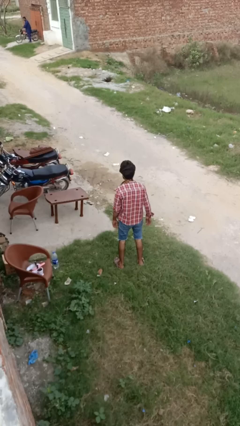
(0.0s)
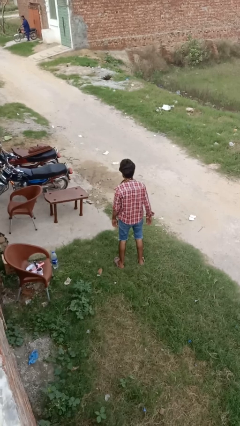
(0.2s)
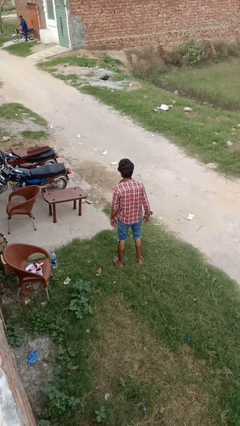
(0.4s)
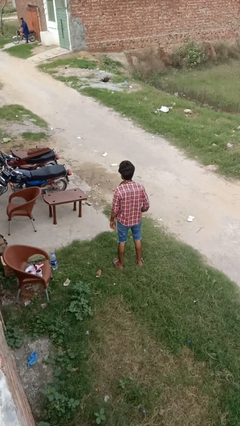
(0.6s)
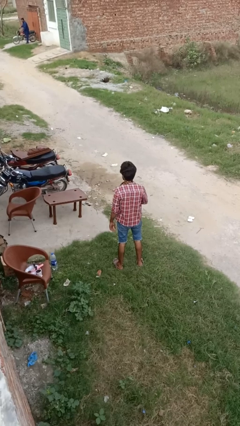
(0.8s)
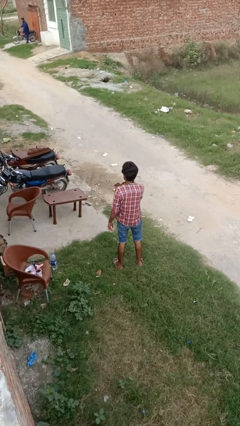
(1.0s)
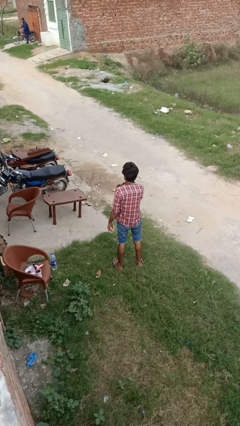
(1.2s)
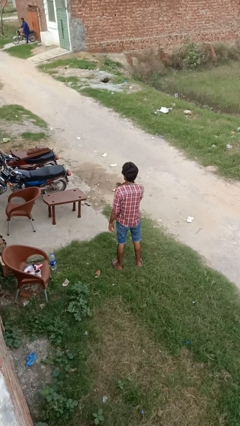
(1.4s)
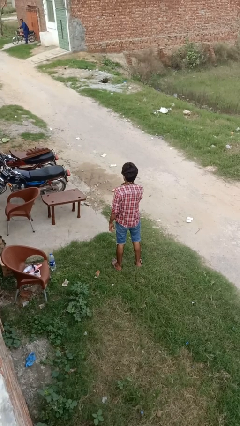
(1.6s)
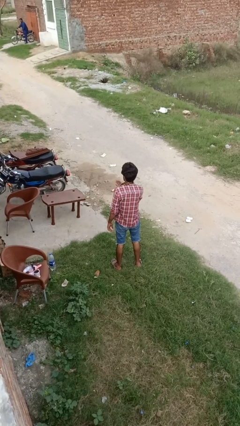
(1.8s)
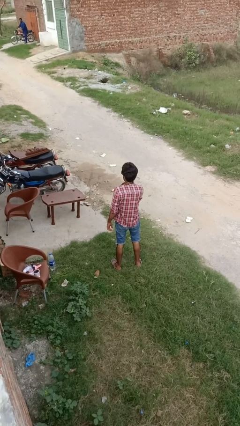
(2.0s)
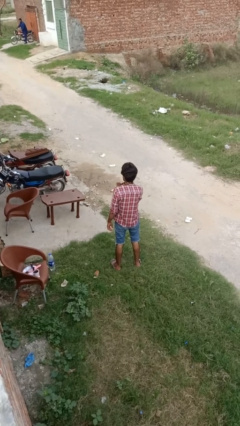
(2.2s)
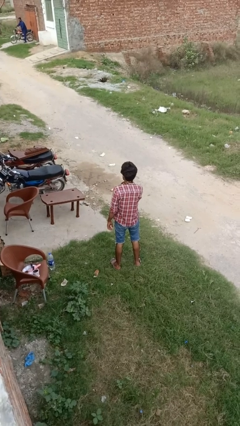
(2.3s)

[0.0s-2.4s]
person drums on chest

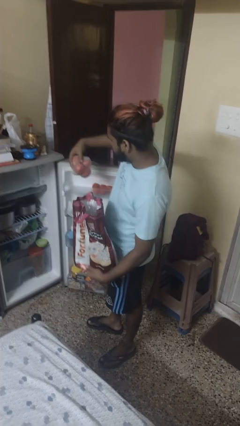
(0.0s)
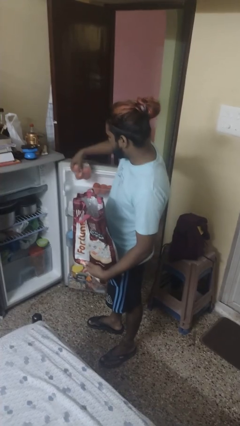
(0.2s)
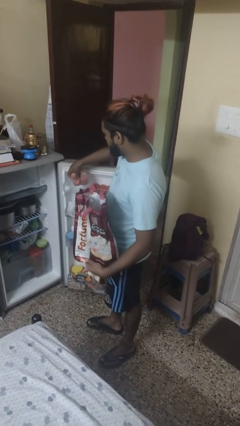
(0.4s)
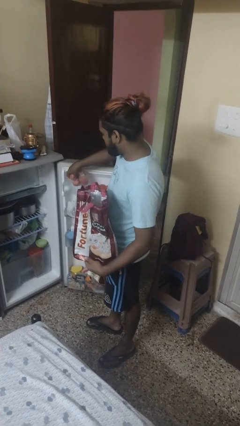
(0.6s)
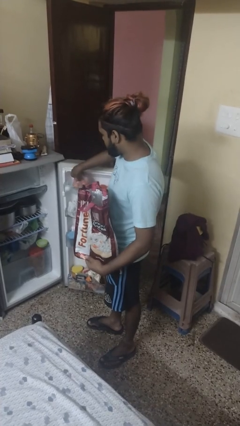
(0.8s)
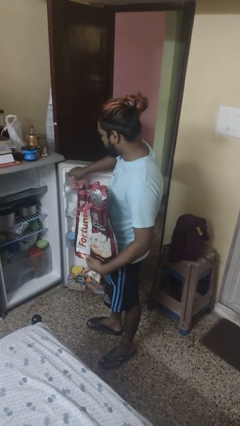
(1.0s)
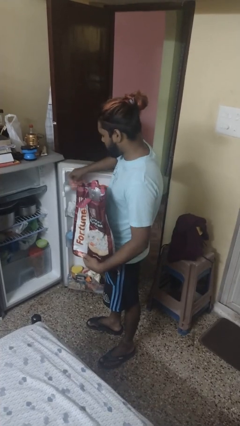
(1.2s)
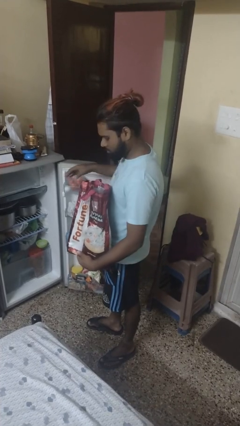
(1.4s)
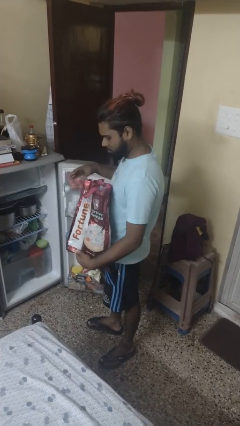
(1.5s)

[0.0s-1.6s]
person loads groceries into refrigerator

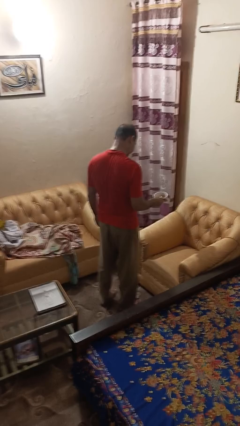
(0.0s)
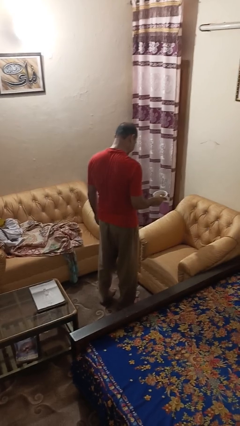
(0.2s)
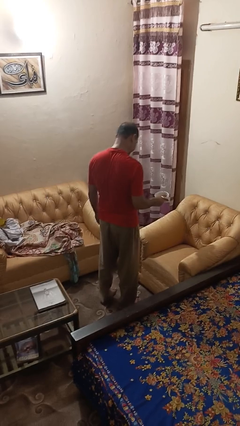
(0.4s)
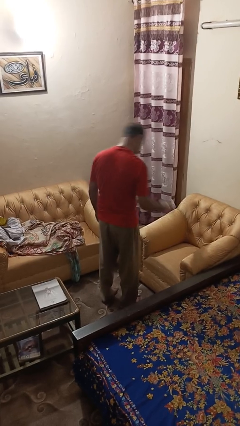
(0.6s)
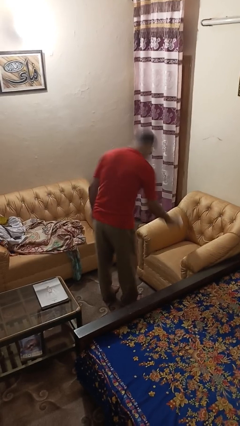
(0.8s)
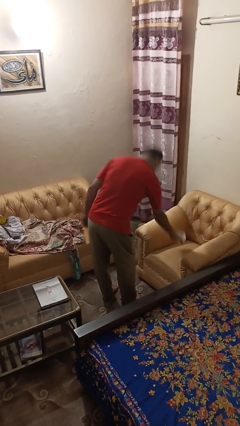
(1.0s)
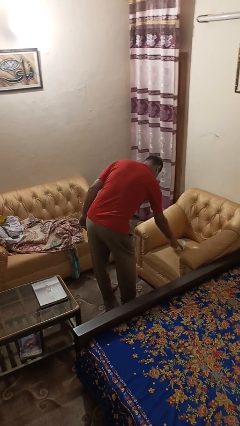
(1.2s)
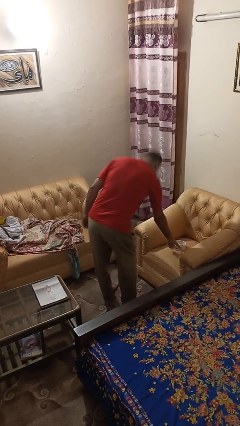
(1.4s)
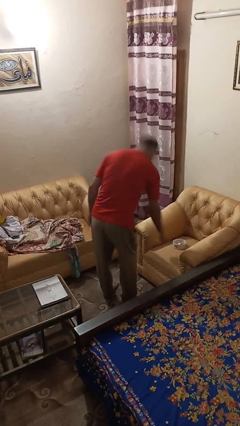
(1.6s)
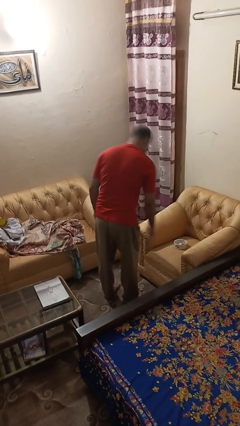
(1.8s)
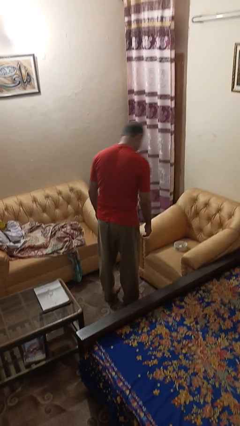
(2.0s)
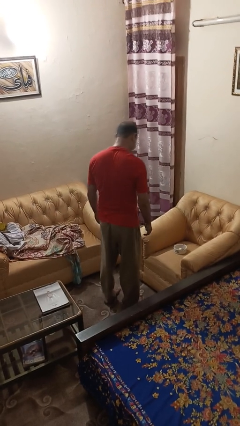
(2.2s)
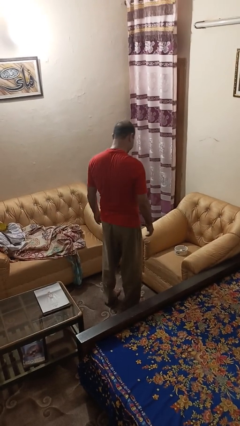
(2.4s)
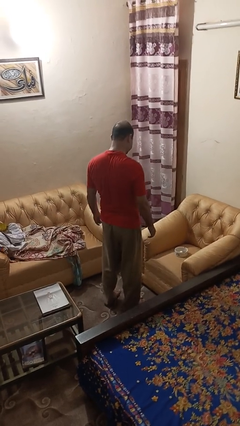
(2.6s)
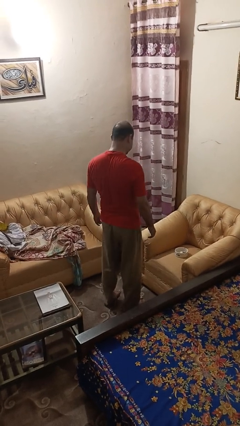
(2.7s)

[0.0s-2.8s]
person puts down object on couch

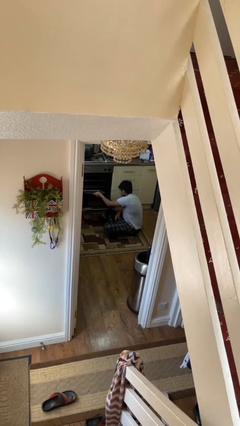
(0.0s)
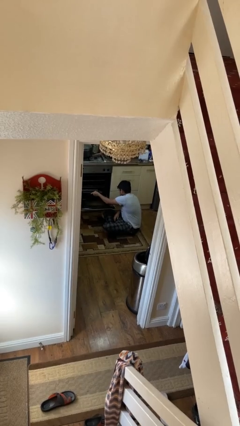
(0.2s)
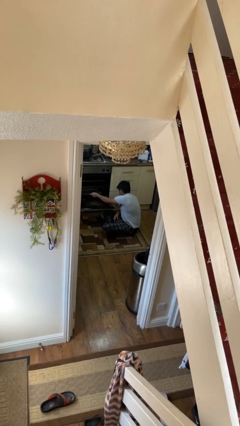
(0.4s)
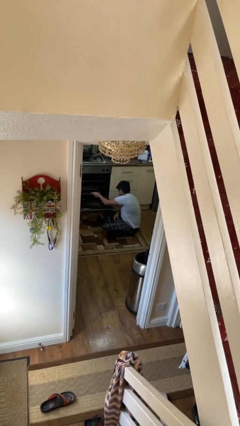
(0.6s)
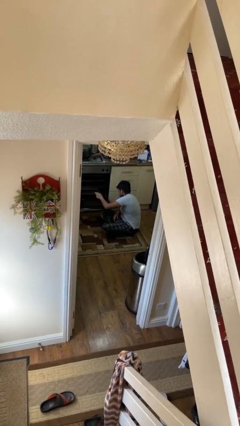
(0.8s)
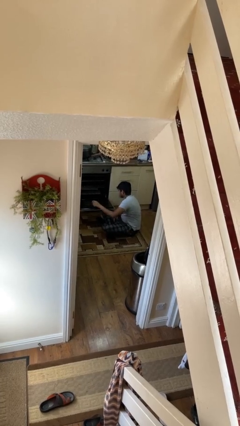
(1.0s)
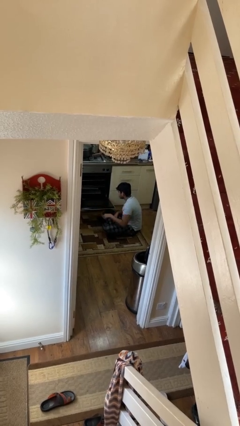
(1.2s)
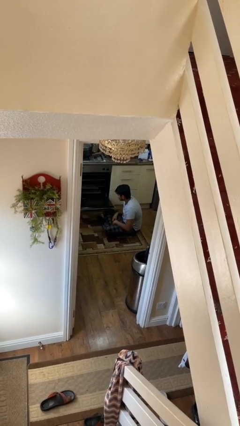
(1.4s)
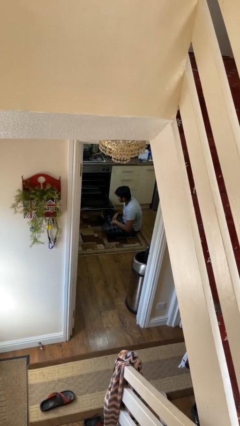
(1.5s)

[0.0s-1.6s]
person puts object into oven

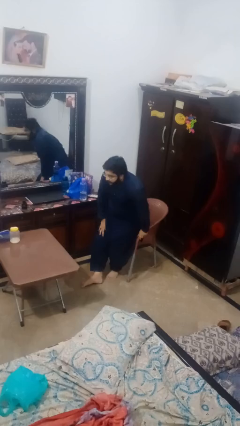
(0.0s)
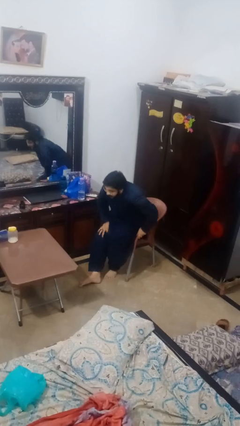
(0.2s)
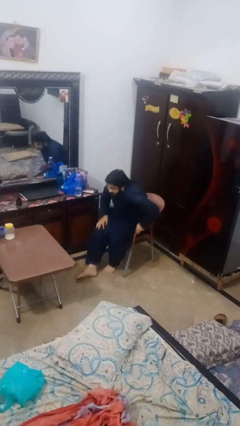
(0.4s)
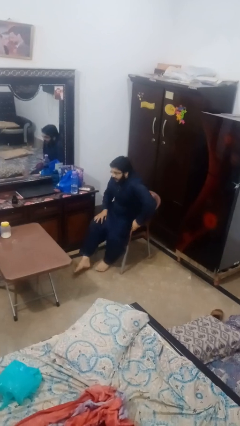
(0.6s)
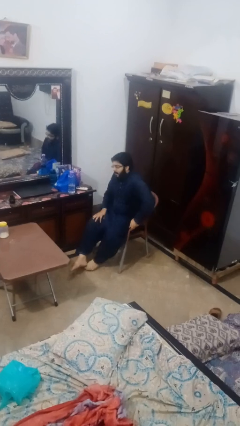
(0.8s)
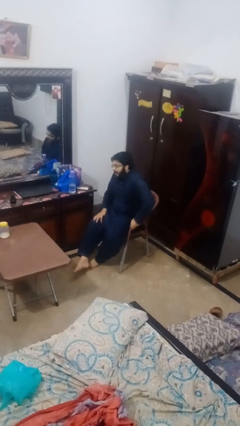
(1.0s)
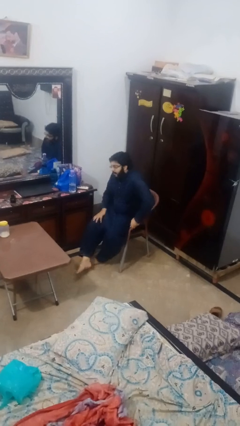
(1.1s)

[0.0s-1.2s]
person sits down

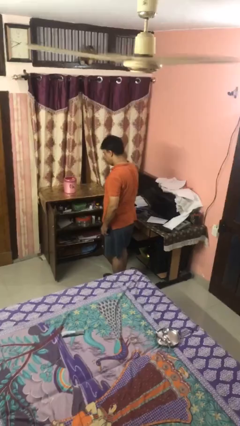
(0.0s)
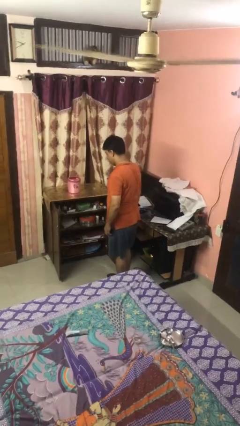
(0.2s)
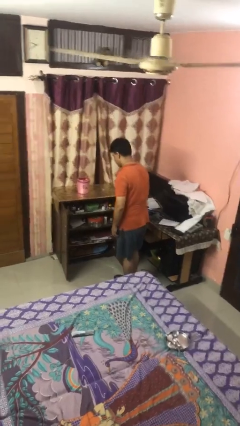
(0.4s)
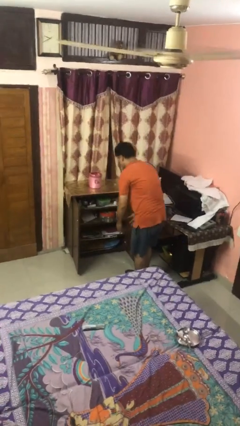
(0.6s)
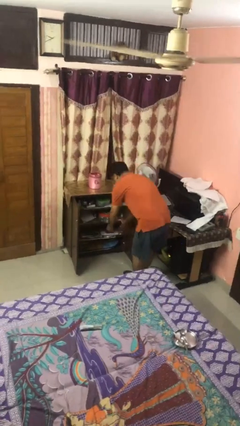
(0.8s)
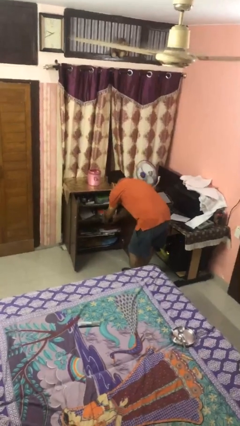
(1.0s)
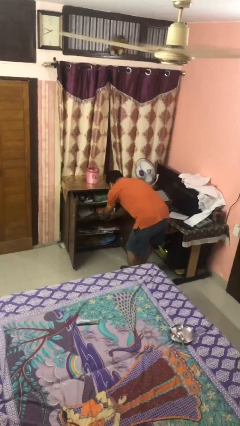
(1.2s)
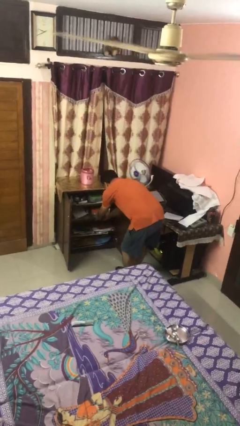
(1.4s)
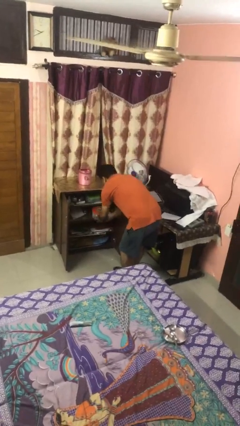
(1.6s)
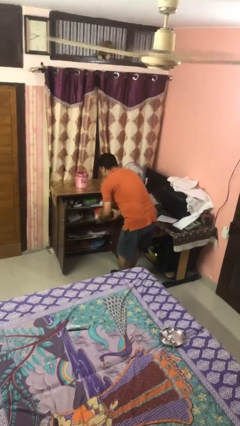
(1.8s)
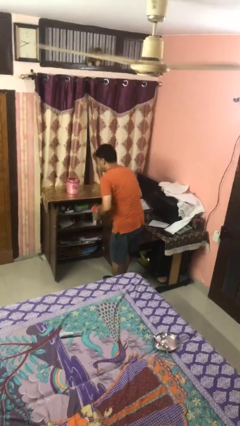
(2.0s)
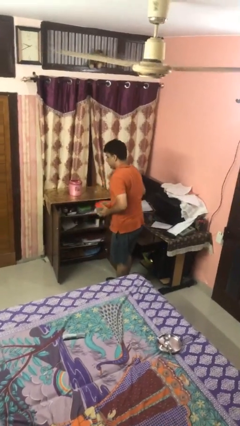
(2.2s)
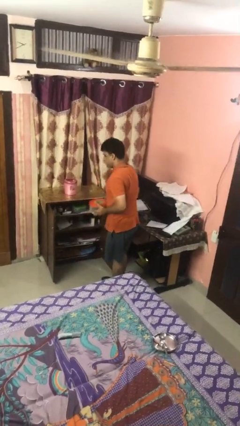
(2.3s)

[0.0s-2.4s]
person picks up object from cabinet

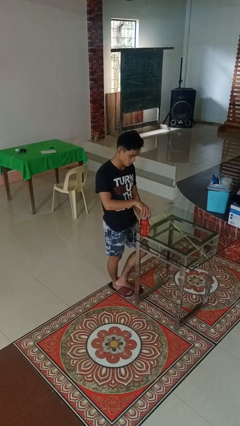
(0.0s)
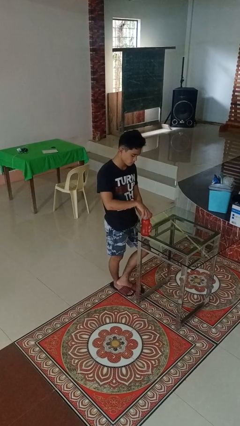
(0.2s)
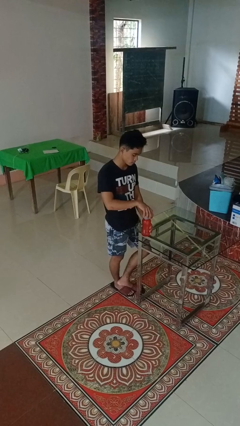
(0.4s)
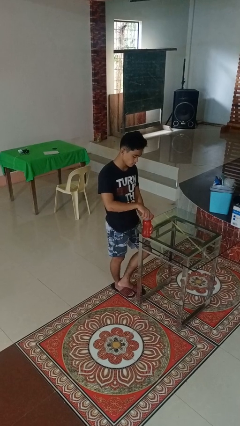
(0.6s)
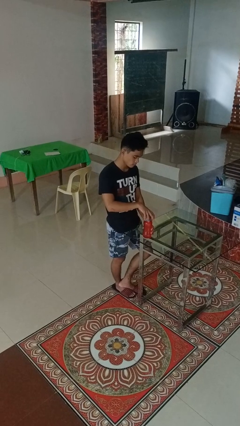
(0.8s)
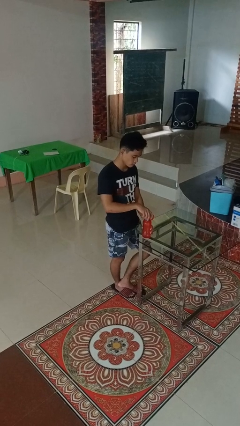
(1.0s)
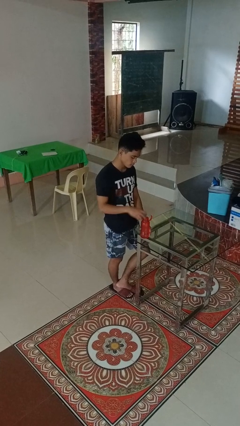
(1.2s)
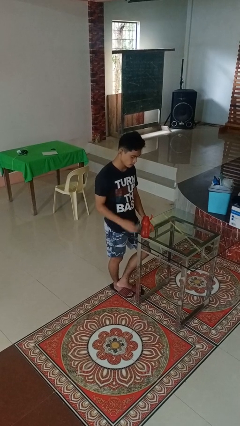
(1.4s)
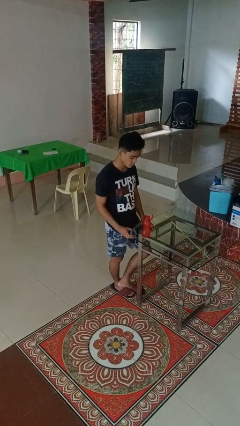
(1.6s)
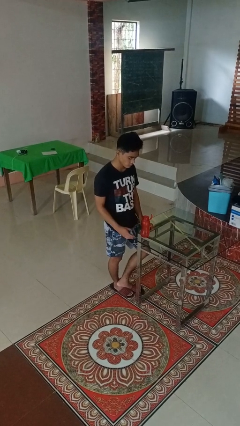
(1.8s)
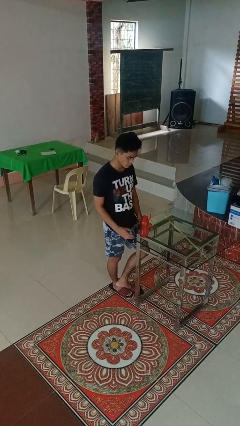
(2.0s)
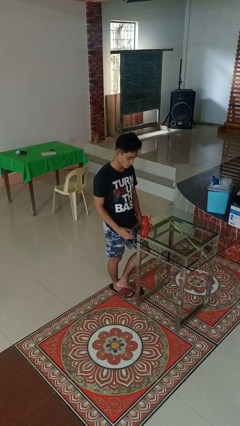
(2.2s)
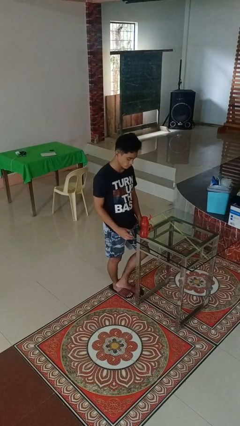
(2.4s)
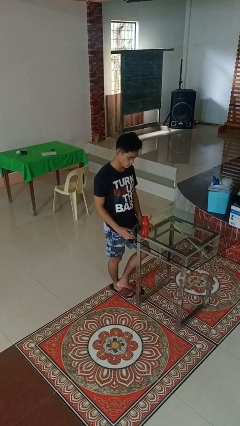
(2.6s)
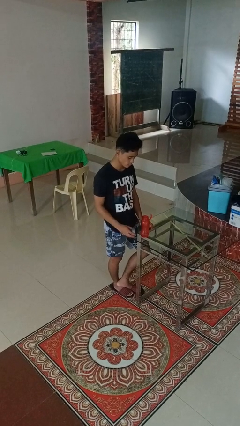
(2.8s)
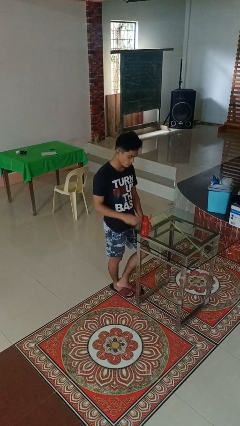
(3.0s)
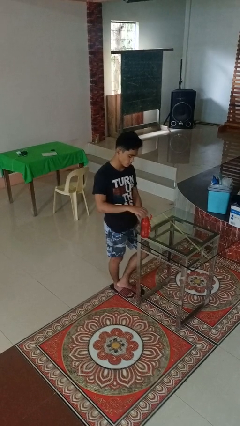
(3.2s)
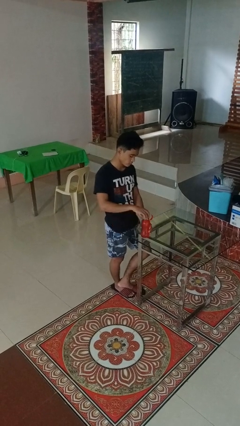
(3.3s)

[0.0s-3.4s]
person unscrews lid from bottle

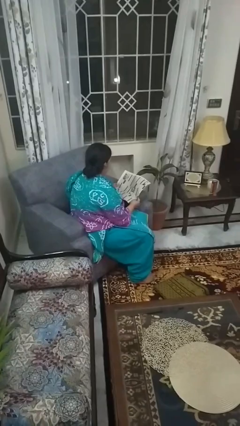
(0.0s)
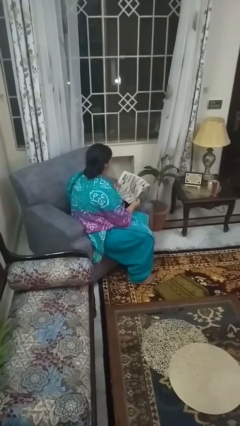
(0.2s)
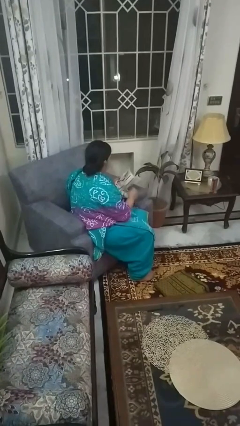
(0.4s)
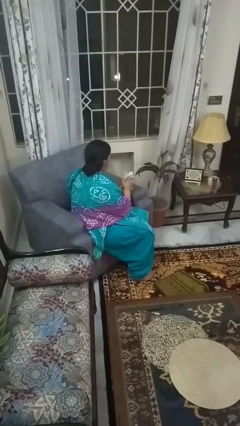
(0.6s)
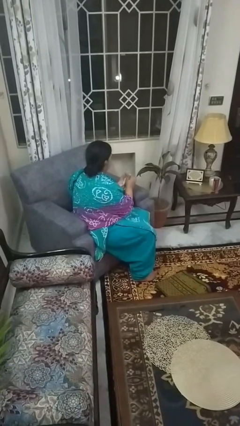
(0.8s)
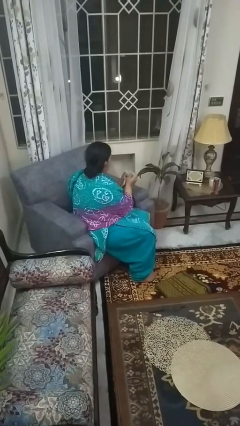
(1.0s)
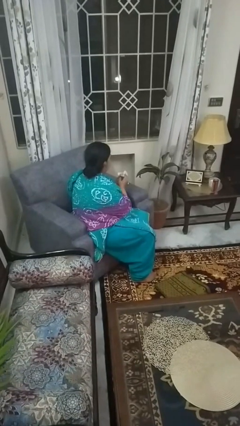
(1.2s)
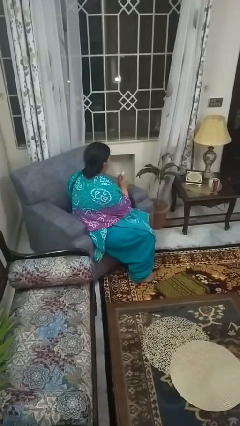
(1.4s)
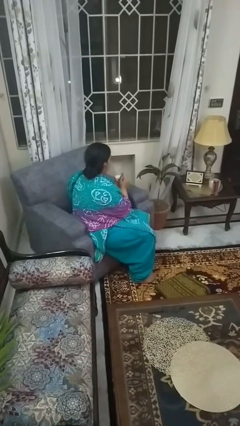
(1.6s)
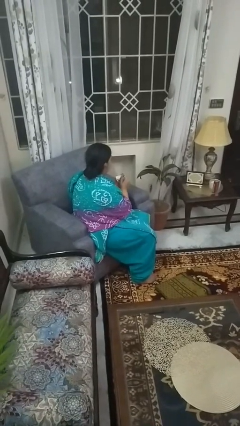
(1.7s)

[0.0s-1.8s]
person crumples paper
